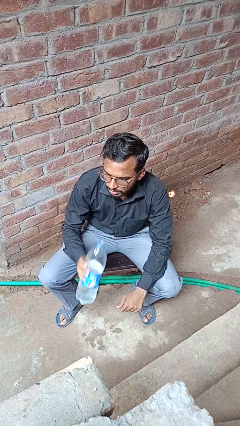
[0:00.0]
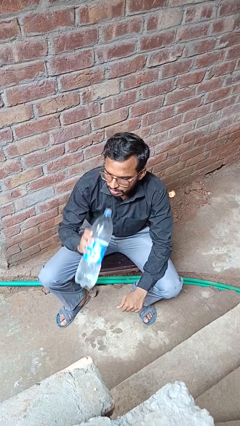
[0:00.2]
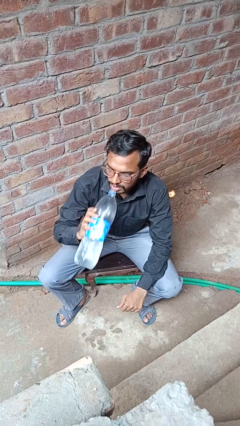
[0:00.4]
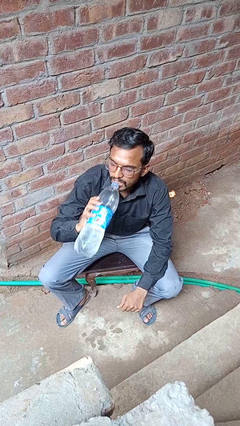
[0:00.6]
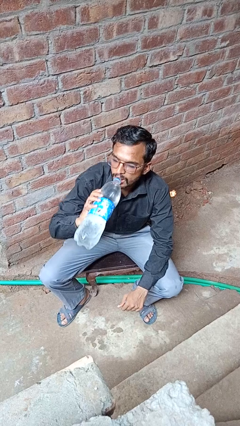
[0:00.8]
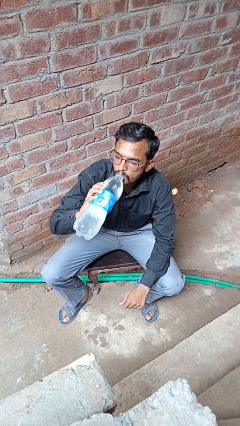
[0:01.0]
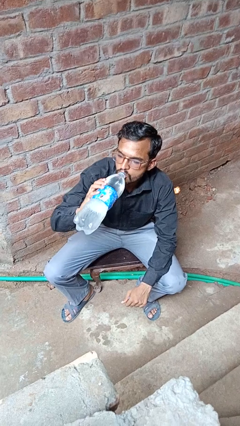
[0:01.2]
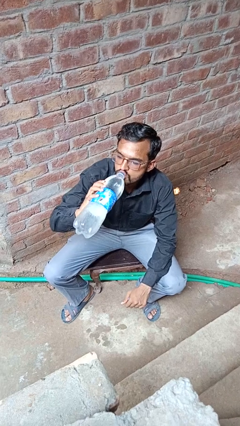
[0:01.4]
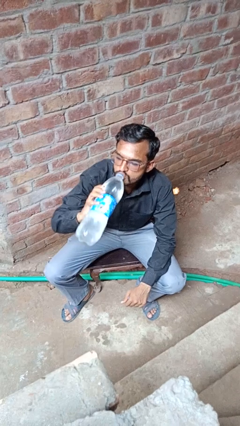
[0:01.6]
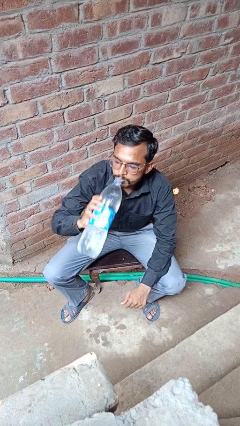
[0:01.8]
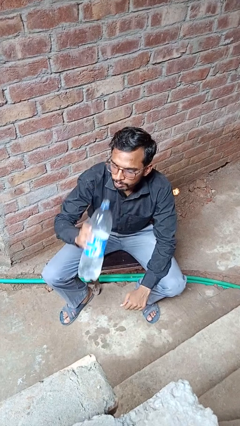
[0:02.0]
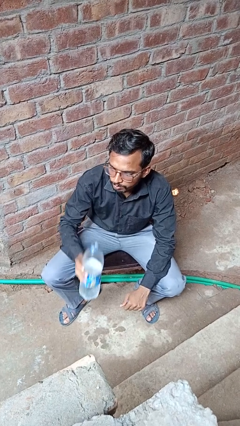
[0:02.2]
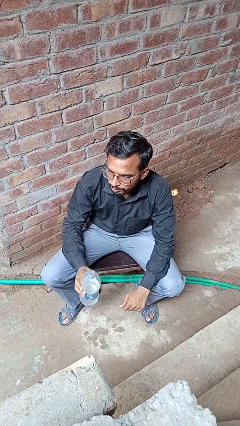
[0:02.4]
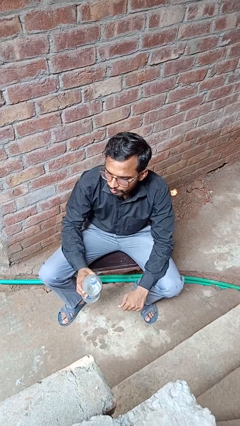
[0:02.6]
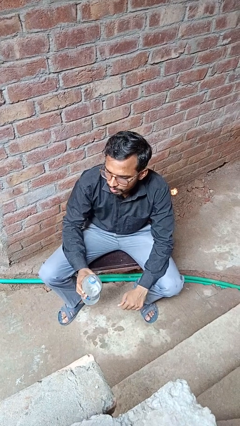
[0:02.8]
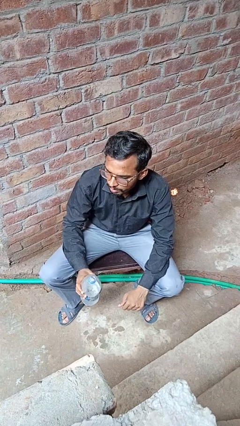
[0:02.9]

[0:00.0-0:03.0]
person drinks from bottle

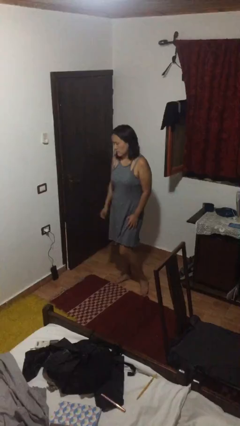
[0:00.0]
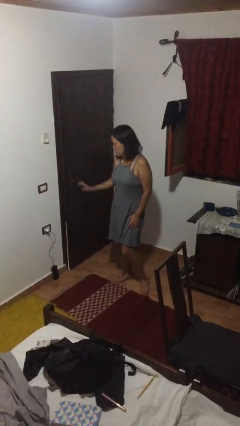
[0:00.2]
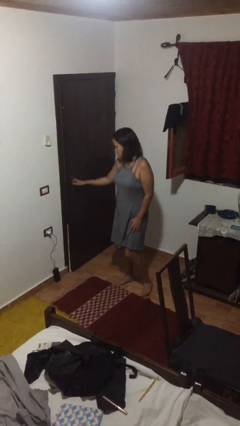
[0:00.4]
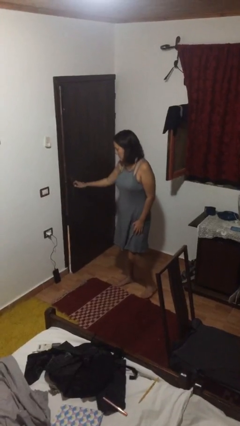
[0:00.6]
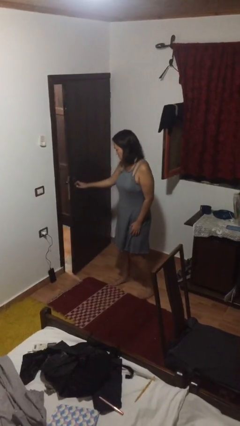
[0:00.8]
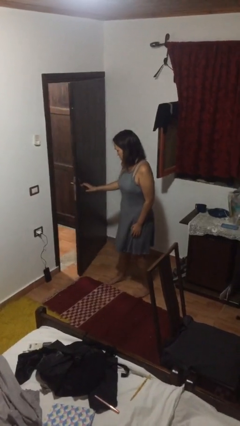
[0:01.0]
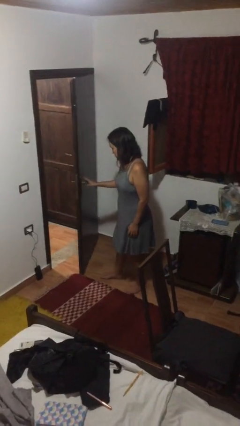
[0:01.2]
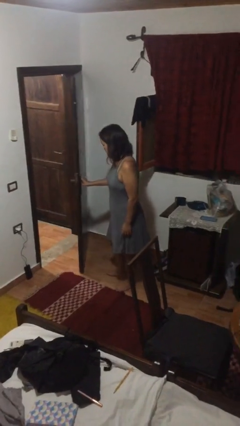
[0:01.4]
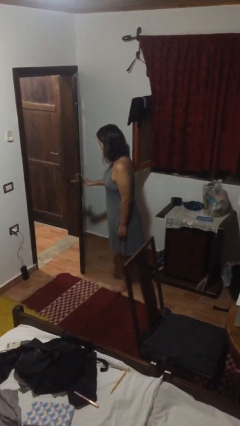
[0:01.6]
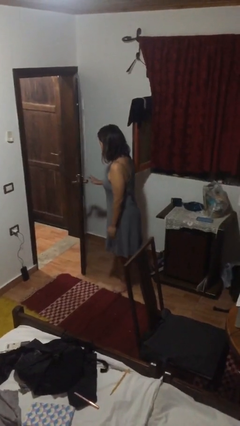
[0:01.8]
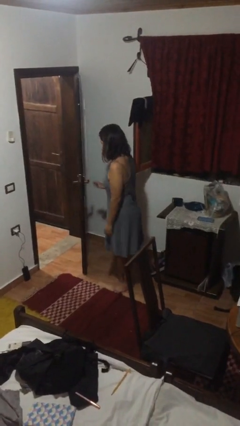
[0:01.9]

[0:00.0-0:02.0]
person opens facility door

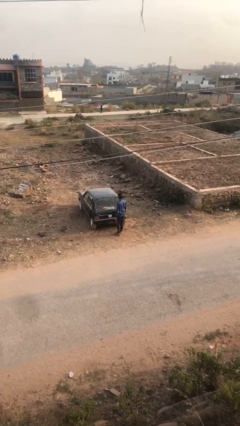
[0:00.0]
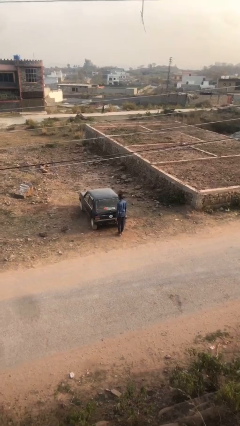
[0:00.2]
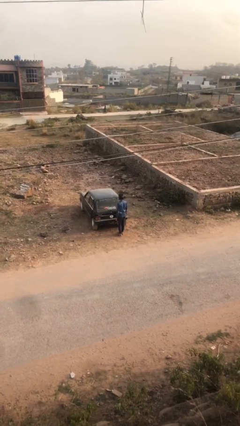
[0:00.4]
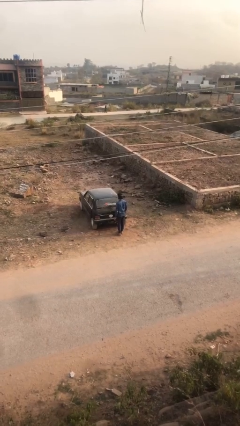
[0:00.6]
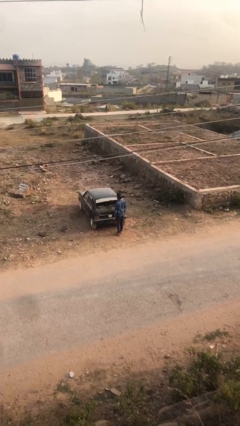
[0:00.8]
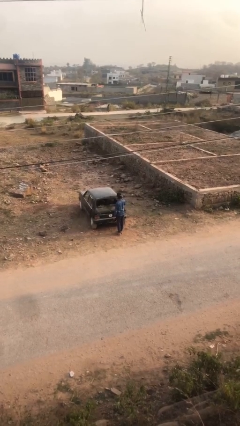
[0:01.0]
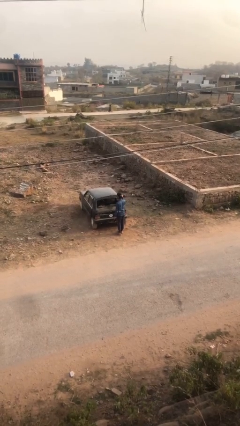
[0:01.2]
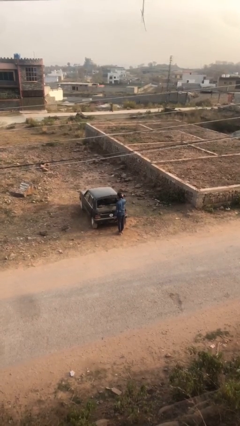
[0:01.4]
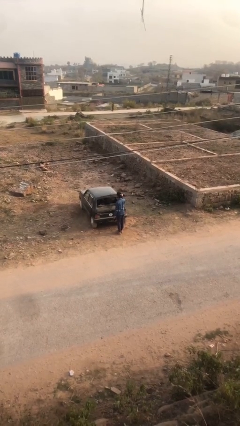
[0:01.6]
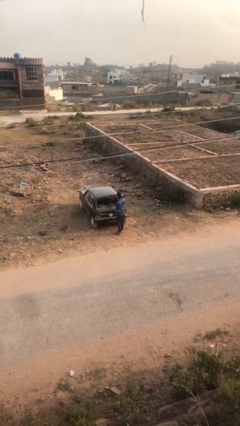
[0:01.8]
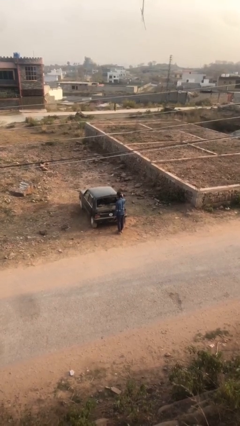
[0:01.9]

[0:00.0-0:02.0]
person opens car trunk

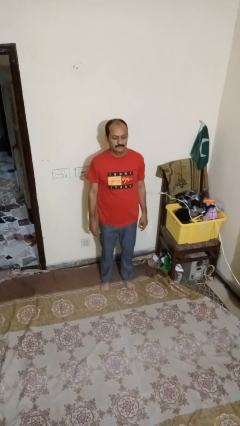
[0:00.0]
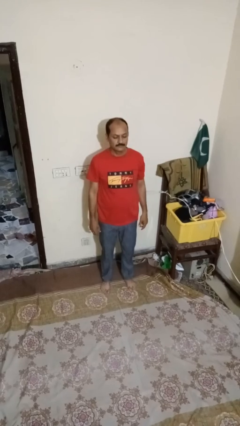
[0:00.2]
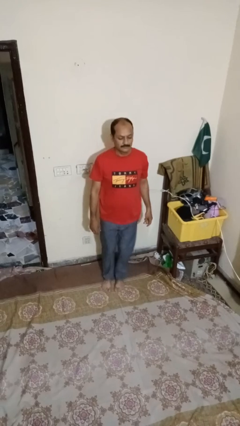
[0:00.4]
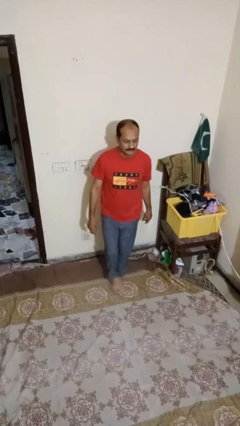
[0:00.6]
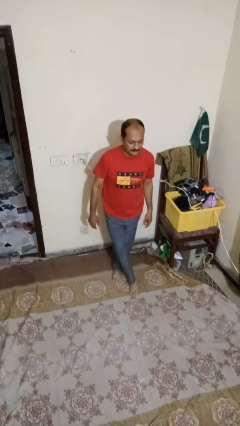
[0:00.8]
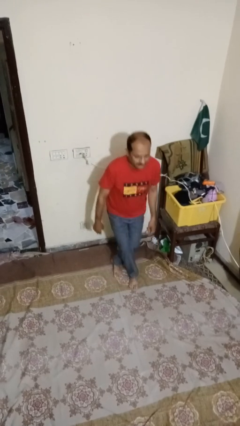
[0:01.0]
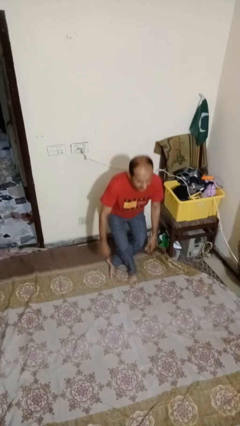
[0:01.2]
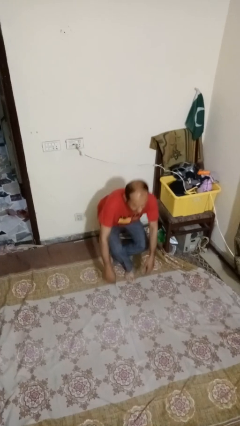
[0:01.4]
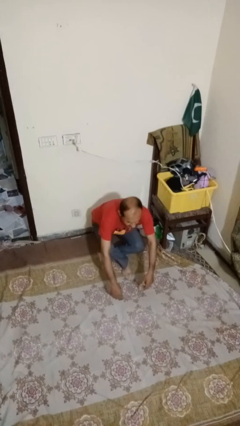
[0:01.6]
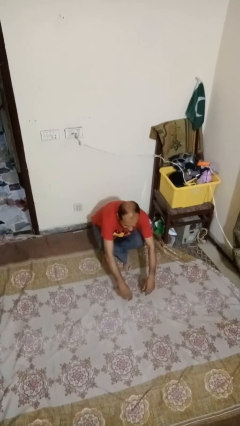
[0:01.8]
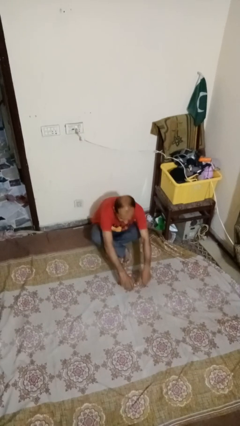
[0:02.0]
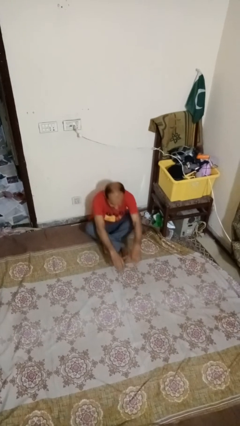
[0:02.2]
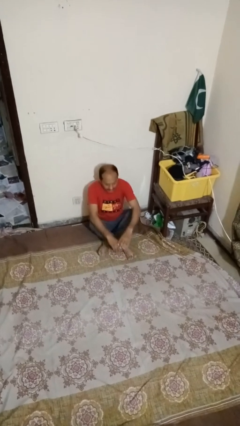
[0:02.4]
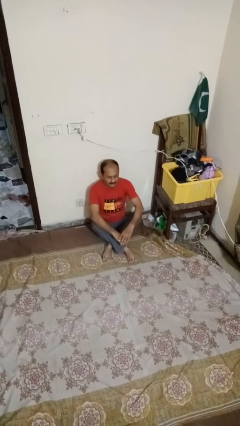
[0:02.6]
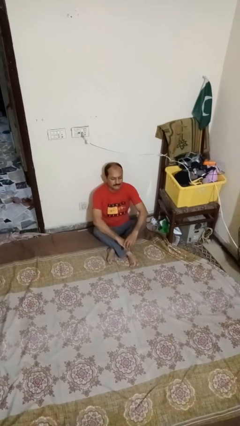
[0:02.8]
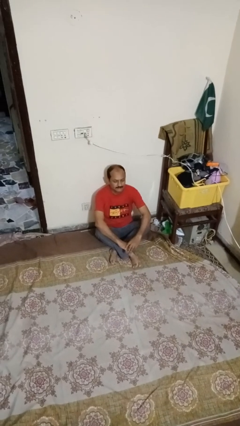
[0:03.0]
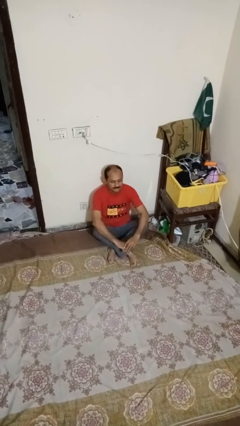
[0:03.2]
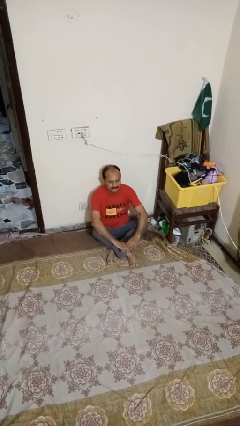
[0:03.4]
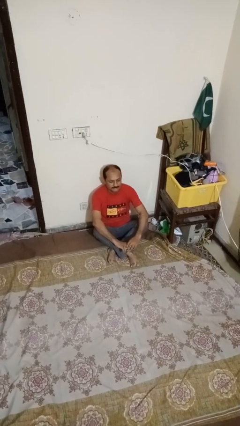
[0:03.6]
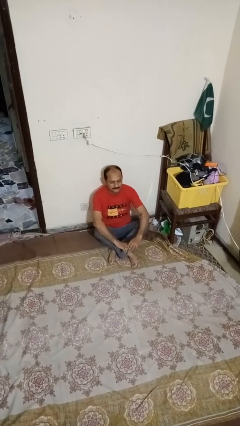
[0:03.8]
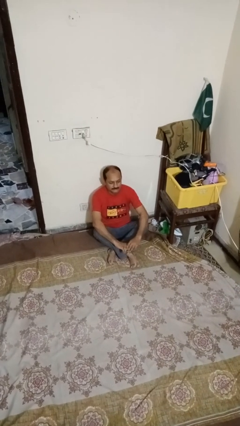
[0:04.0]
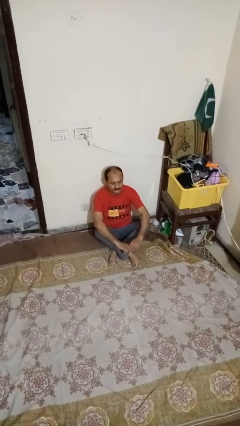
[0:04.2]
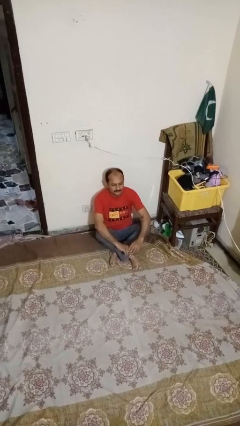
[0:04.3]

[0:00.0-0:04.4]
person sits crisscross

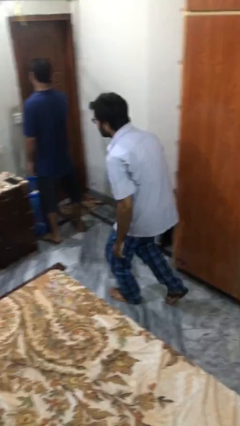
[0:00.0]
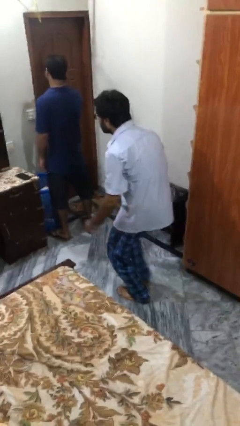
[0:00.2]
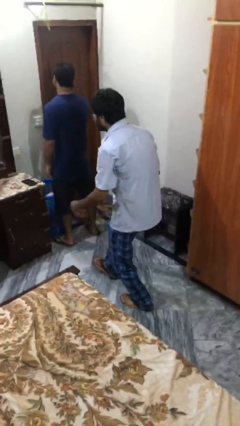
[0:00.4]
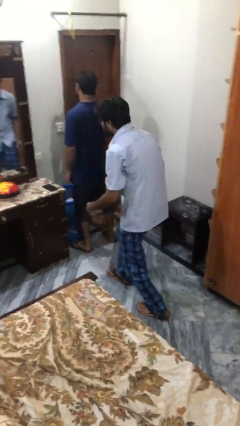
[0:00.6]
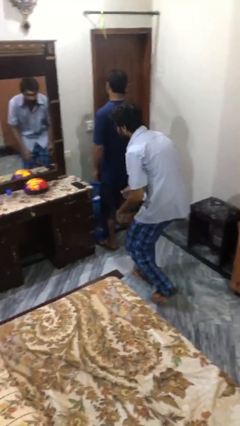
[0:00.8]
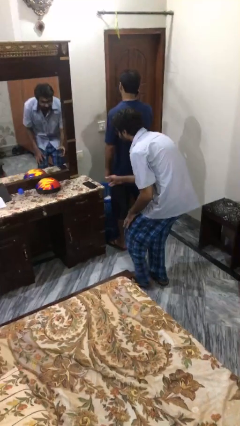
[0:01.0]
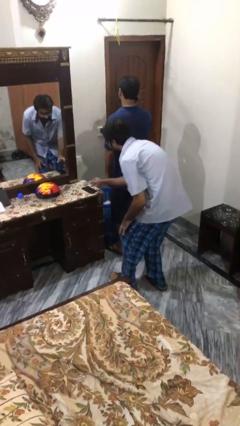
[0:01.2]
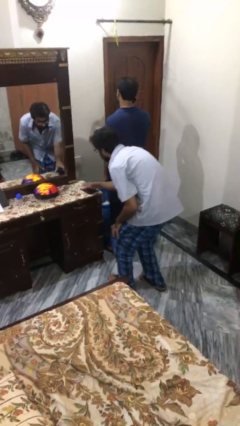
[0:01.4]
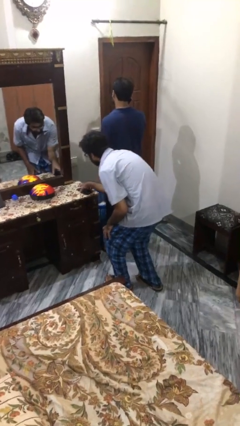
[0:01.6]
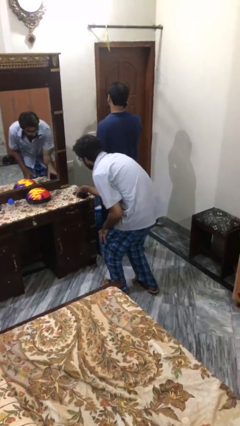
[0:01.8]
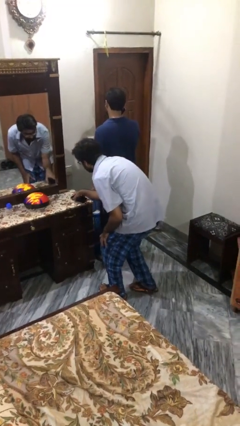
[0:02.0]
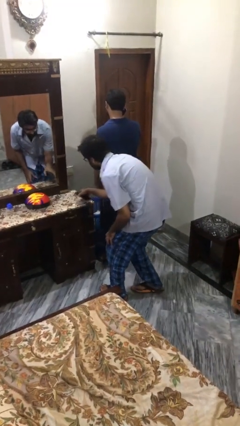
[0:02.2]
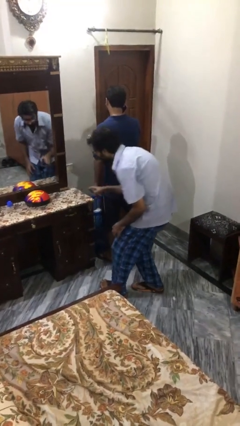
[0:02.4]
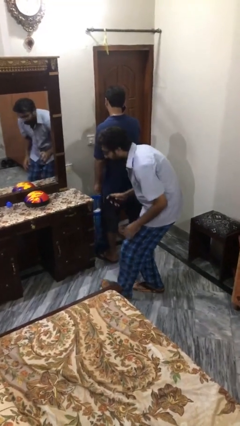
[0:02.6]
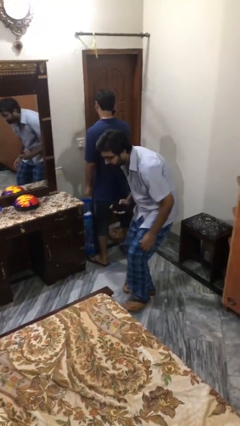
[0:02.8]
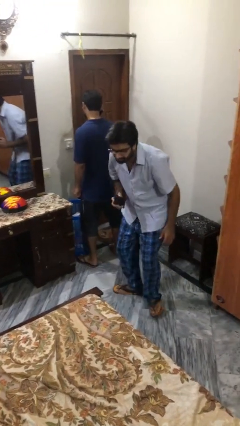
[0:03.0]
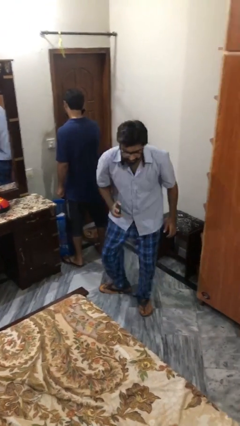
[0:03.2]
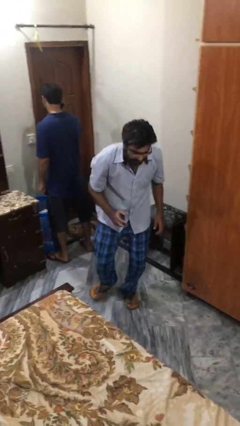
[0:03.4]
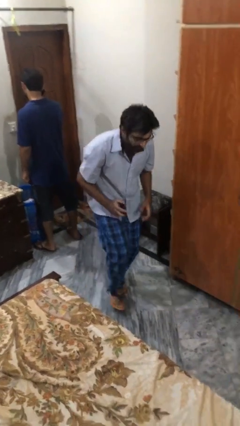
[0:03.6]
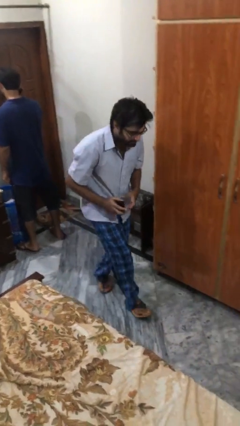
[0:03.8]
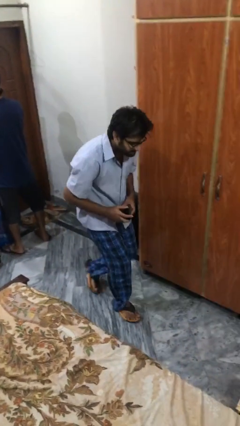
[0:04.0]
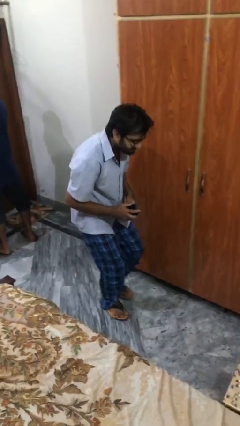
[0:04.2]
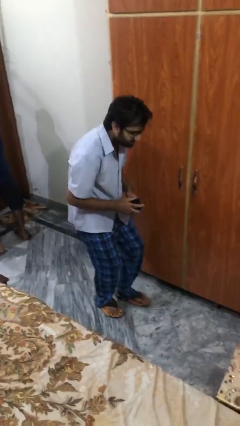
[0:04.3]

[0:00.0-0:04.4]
person steals object from person

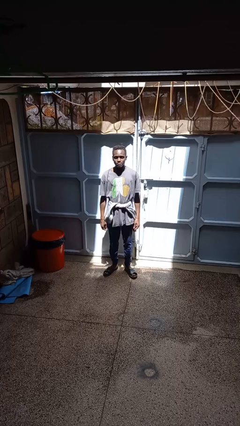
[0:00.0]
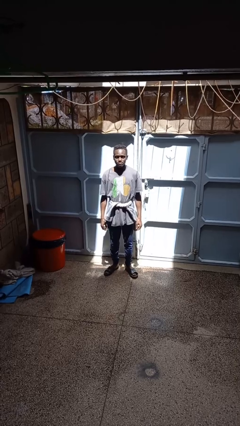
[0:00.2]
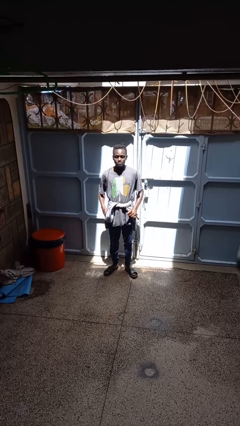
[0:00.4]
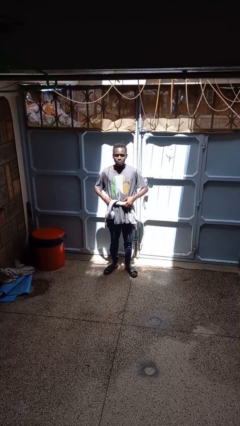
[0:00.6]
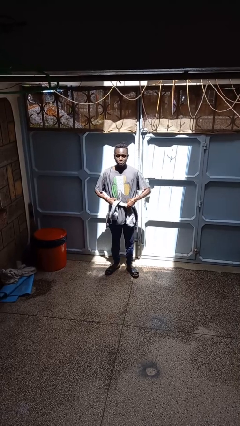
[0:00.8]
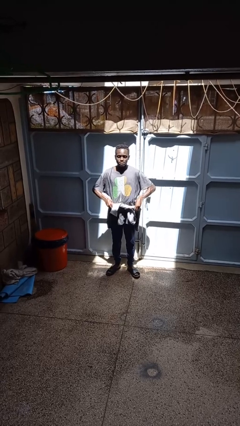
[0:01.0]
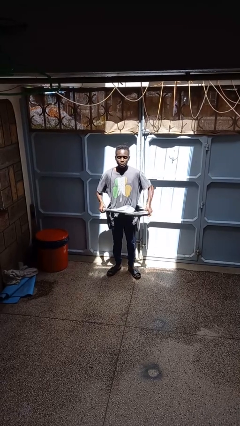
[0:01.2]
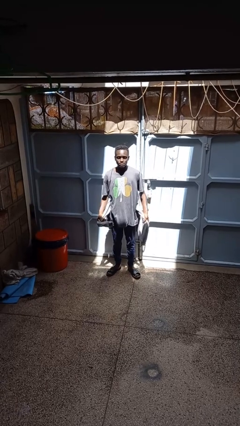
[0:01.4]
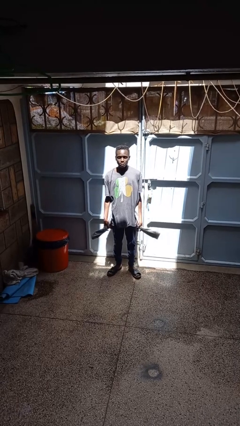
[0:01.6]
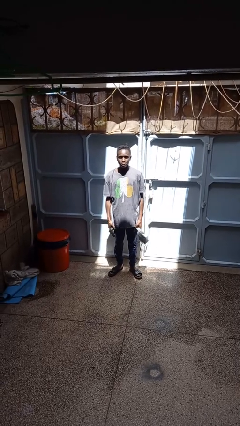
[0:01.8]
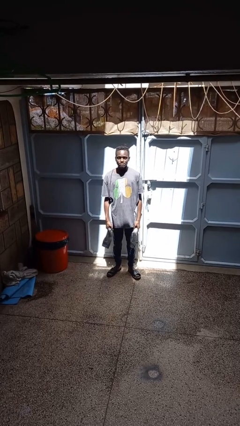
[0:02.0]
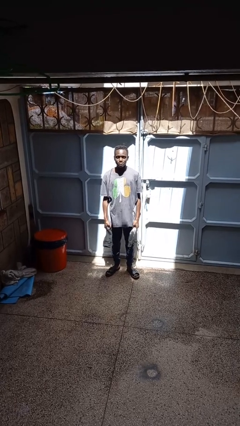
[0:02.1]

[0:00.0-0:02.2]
person unties jacket around waist
